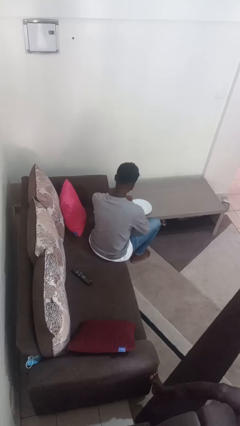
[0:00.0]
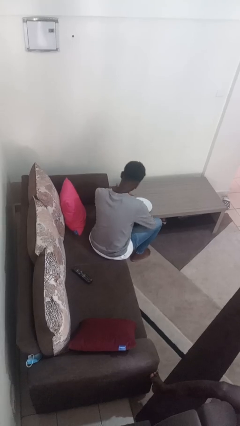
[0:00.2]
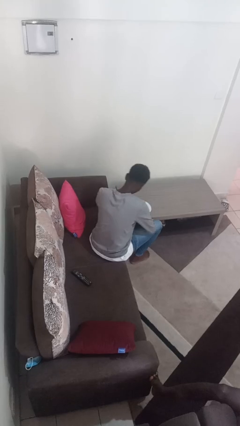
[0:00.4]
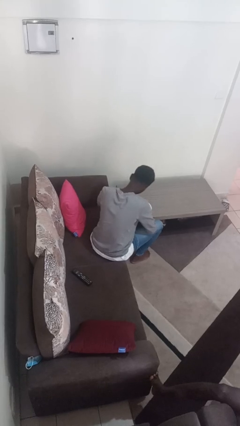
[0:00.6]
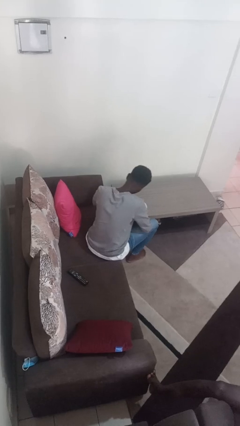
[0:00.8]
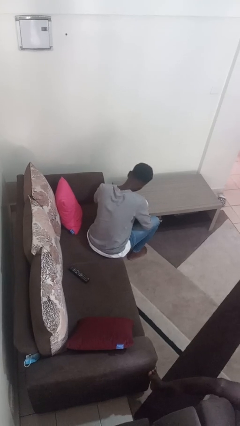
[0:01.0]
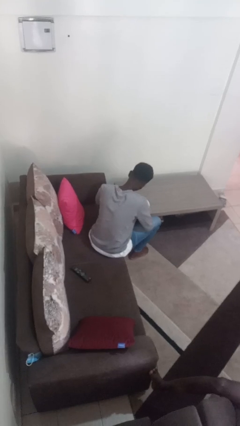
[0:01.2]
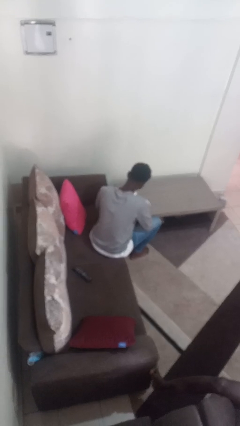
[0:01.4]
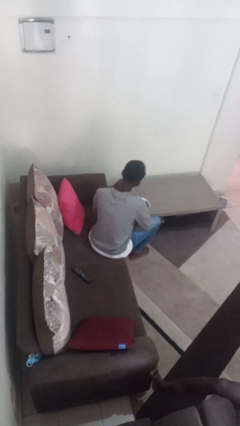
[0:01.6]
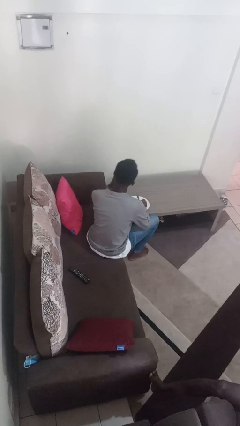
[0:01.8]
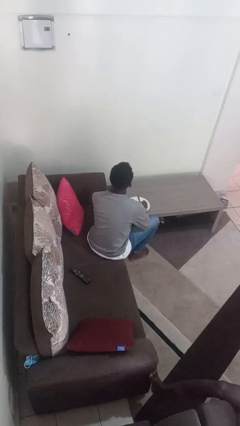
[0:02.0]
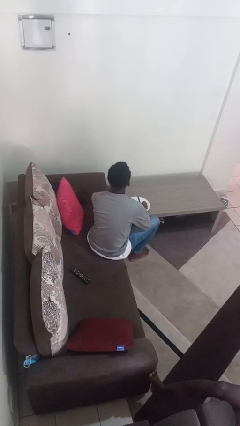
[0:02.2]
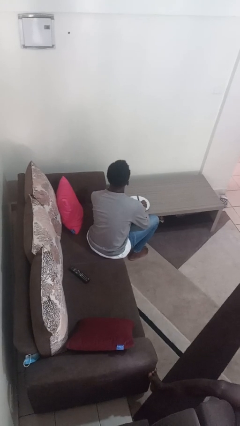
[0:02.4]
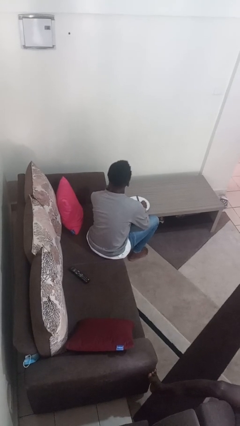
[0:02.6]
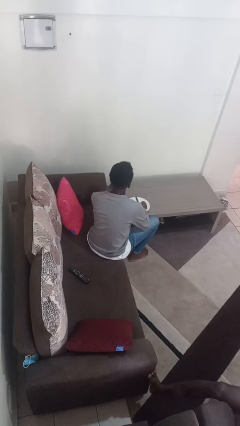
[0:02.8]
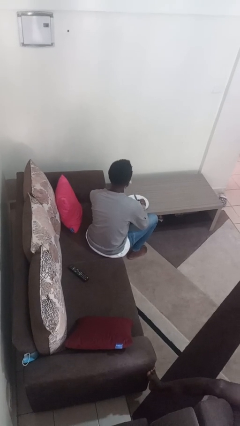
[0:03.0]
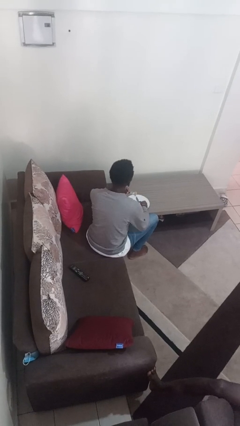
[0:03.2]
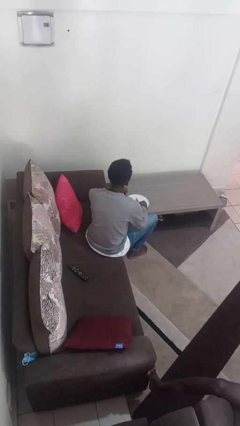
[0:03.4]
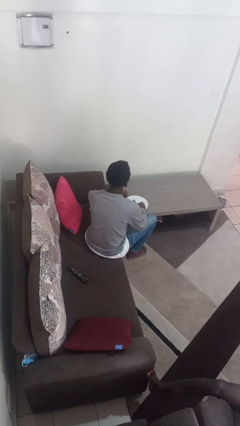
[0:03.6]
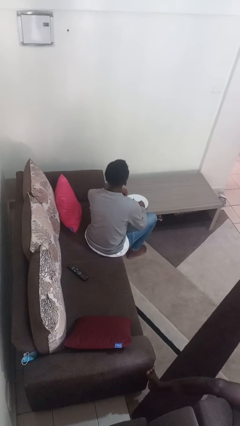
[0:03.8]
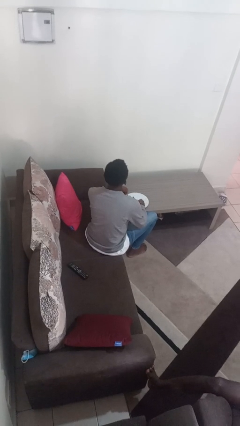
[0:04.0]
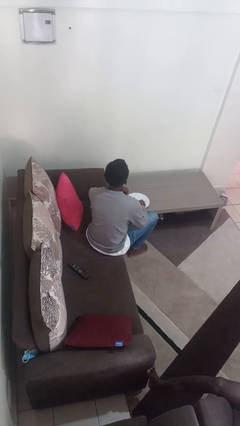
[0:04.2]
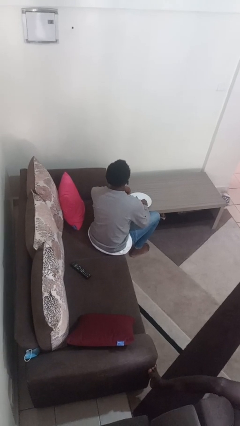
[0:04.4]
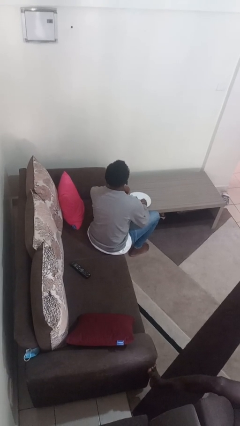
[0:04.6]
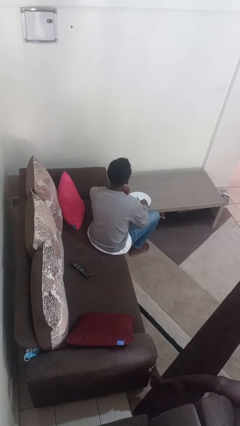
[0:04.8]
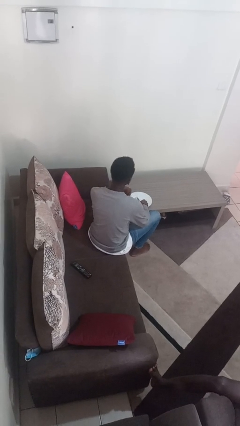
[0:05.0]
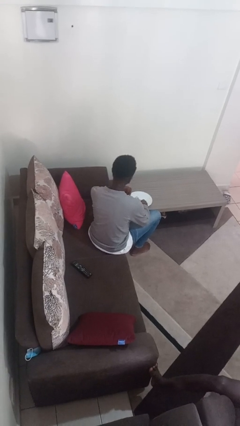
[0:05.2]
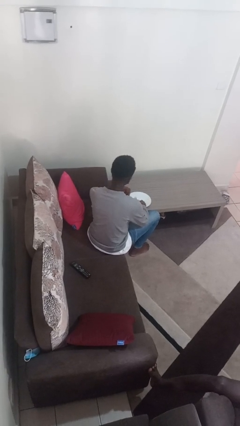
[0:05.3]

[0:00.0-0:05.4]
person eats with utensil

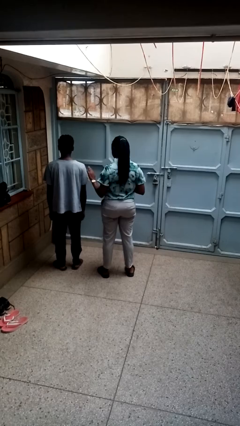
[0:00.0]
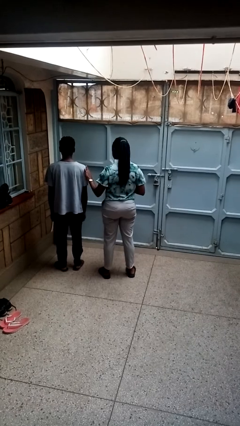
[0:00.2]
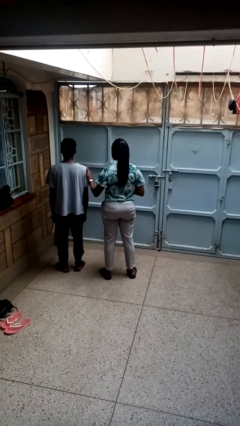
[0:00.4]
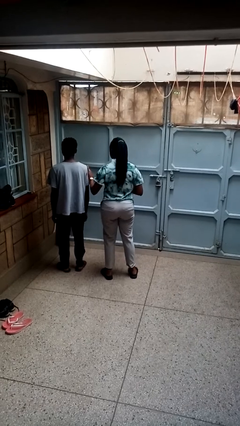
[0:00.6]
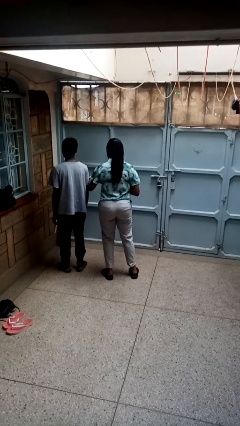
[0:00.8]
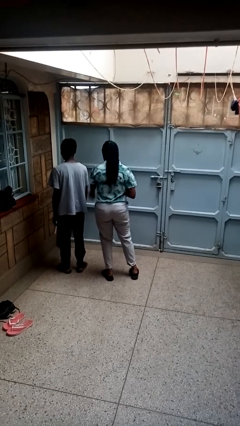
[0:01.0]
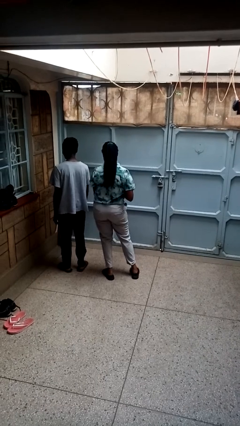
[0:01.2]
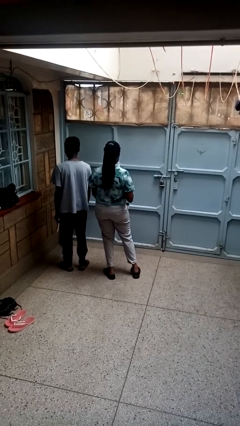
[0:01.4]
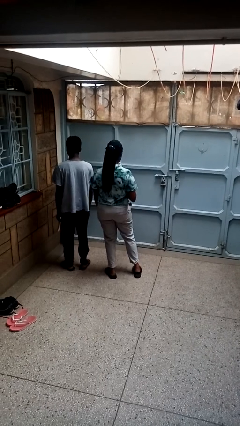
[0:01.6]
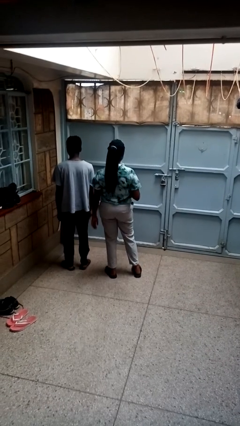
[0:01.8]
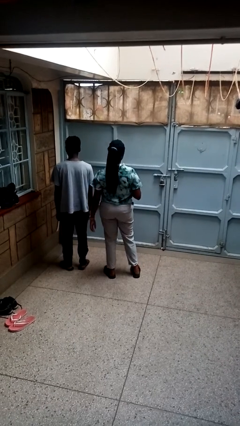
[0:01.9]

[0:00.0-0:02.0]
person shoves person

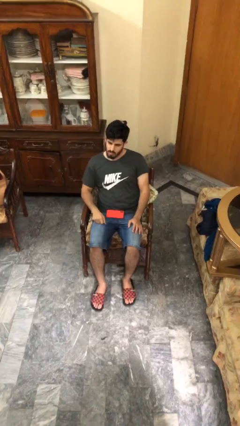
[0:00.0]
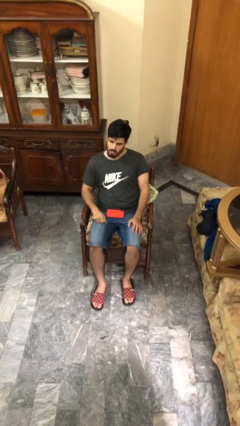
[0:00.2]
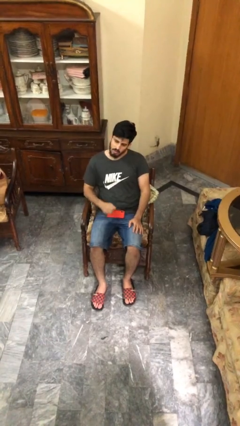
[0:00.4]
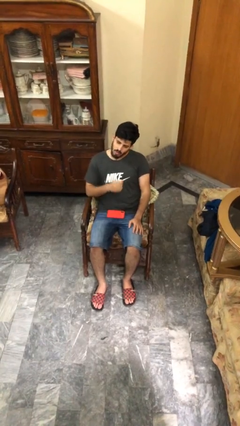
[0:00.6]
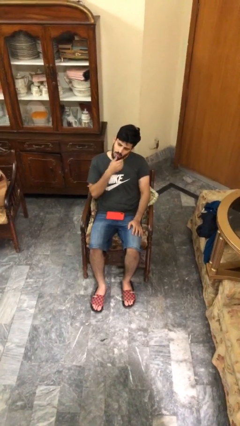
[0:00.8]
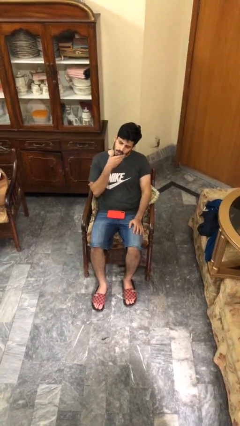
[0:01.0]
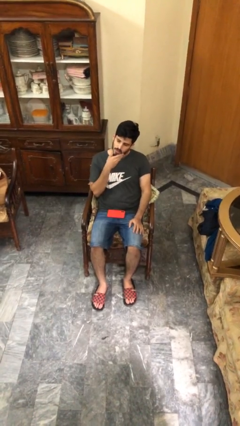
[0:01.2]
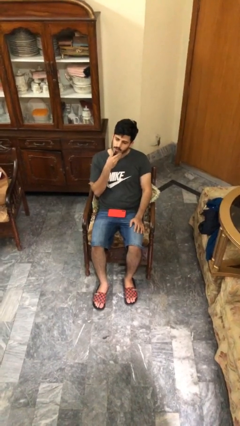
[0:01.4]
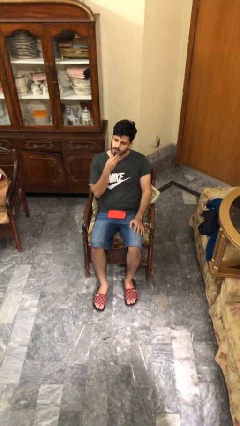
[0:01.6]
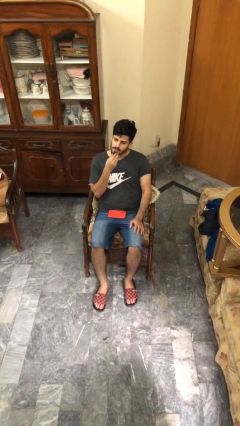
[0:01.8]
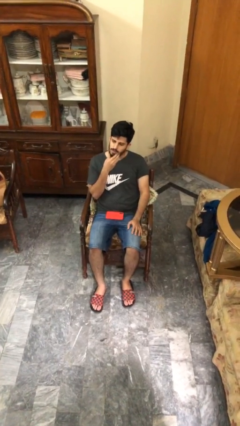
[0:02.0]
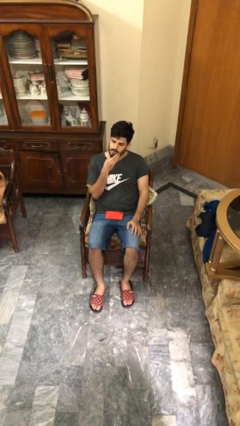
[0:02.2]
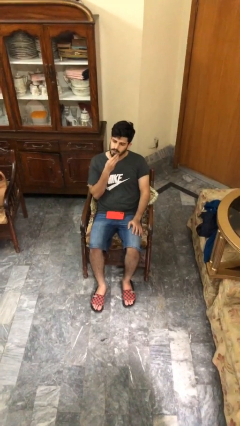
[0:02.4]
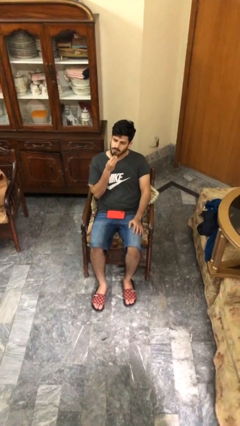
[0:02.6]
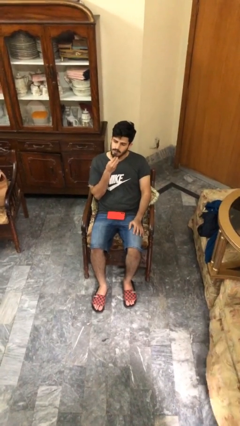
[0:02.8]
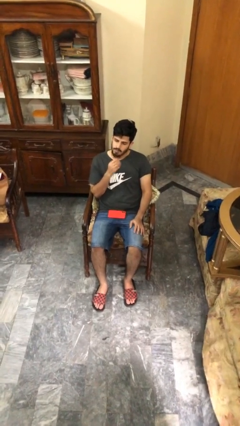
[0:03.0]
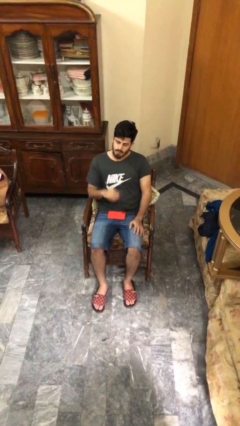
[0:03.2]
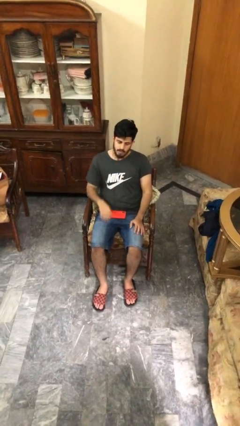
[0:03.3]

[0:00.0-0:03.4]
person strokes chin

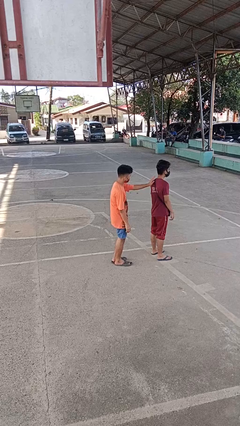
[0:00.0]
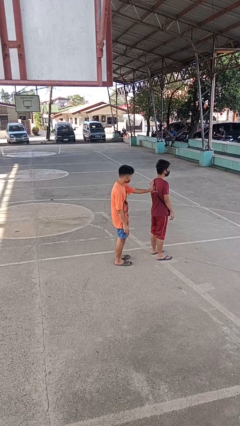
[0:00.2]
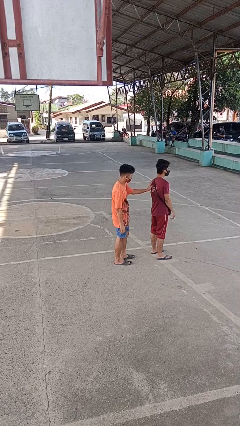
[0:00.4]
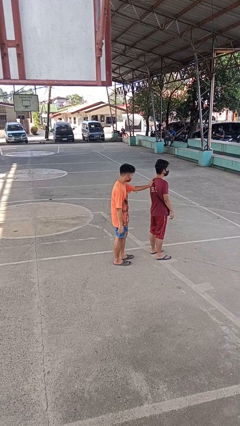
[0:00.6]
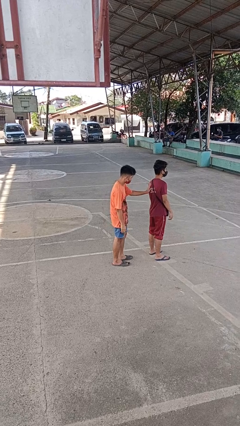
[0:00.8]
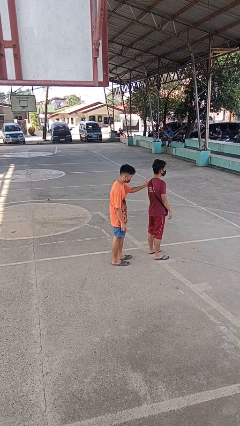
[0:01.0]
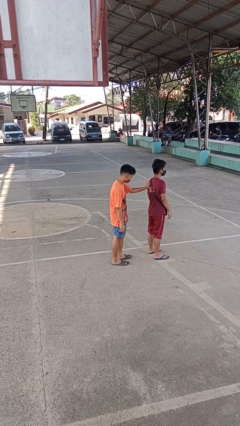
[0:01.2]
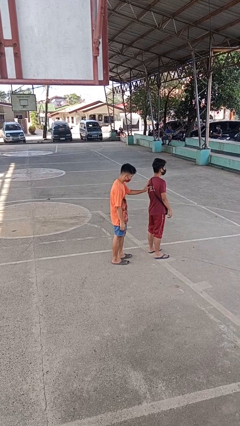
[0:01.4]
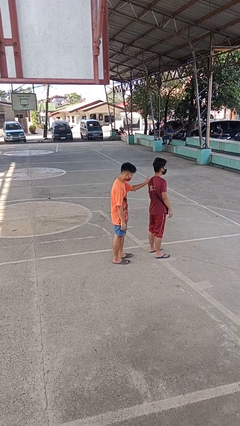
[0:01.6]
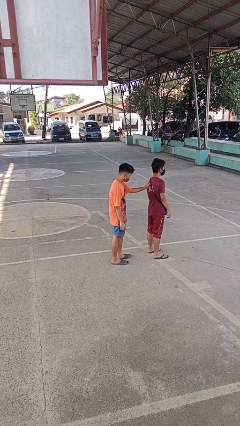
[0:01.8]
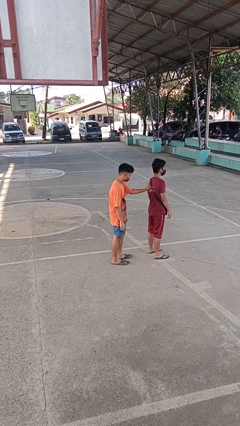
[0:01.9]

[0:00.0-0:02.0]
person touches back of person

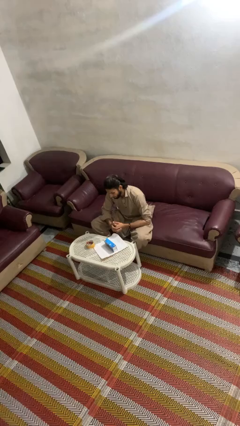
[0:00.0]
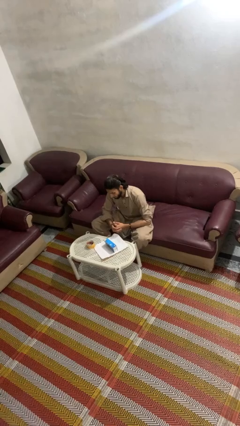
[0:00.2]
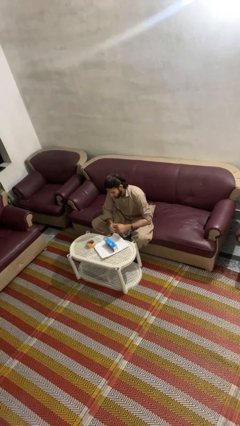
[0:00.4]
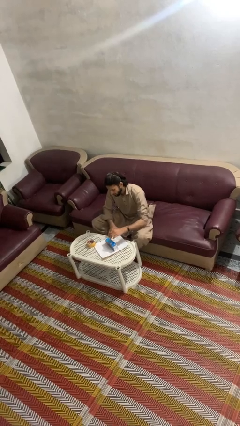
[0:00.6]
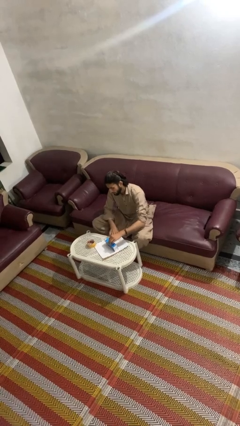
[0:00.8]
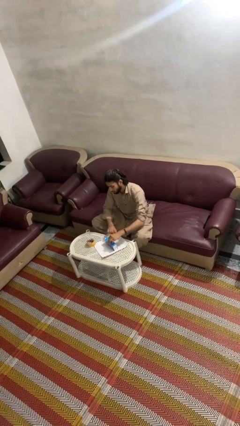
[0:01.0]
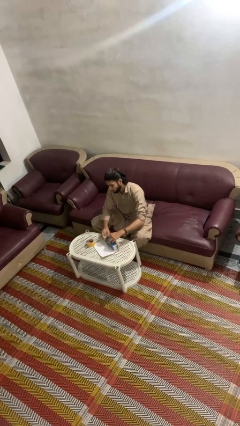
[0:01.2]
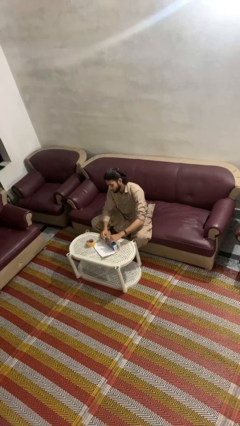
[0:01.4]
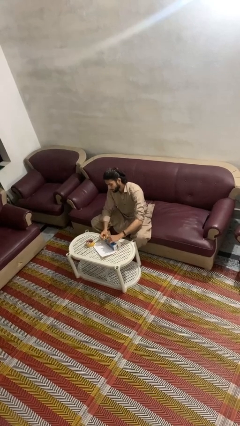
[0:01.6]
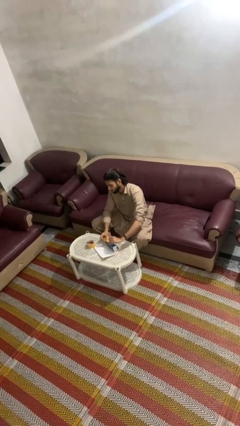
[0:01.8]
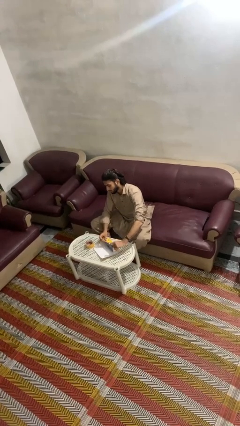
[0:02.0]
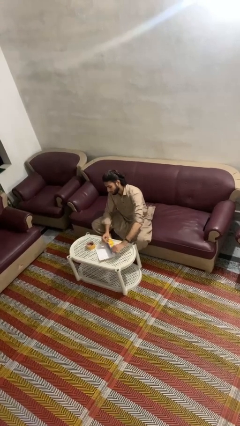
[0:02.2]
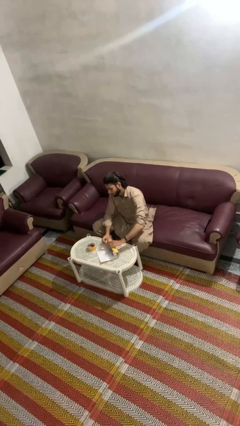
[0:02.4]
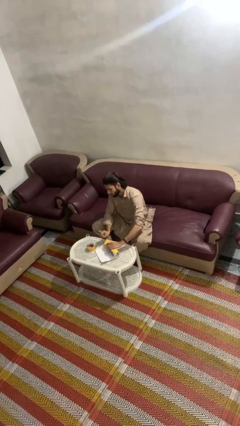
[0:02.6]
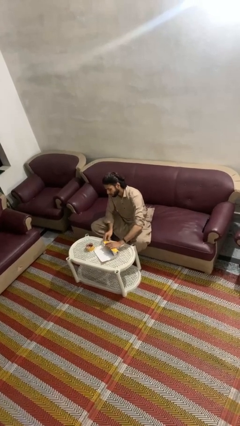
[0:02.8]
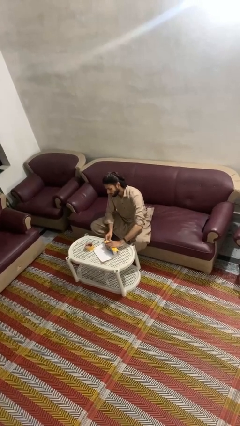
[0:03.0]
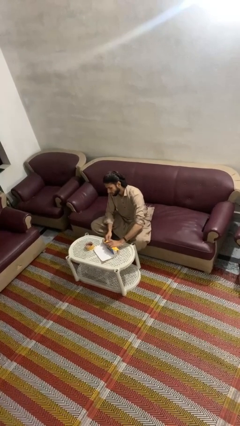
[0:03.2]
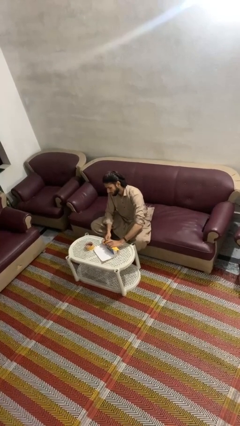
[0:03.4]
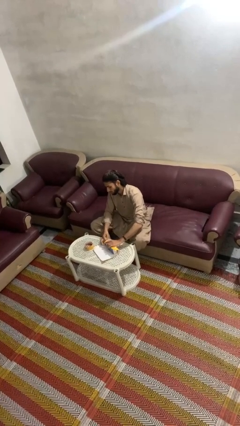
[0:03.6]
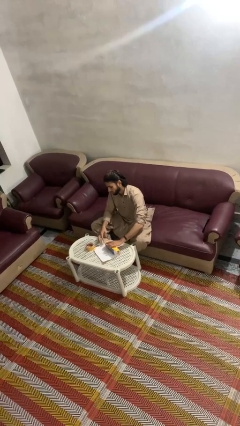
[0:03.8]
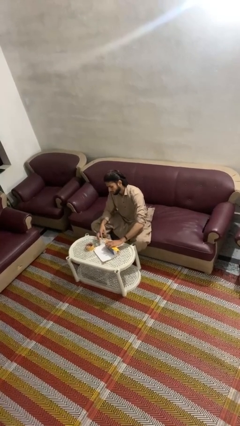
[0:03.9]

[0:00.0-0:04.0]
person wraps box

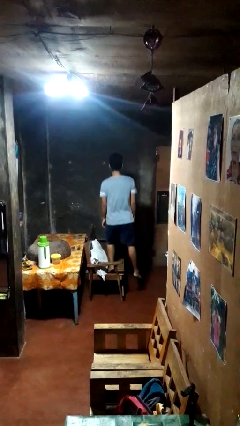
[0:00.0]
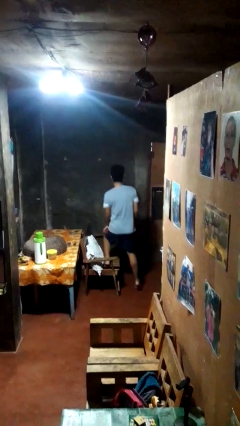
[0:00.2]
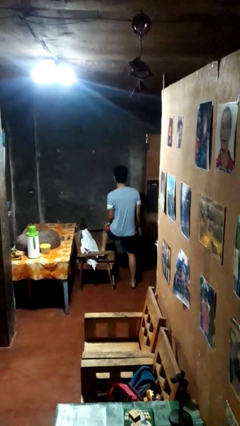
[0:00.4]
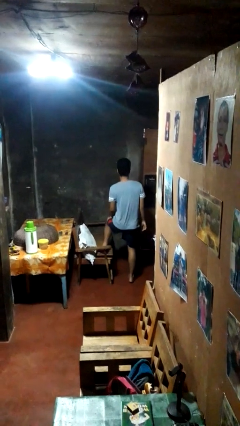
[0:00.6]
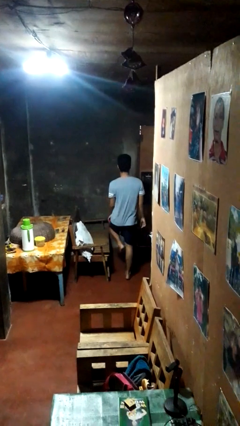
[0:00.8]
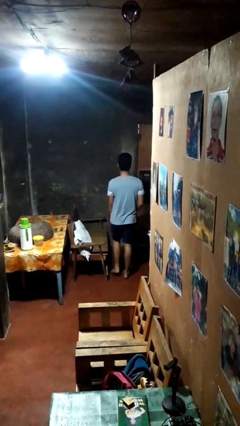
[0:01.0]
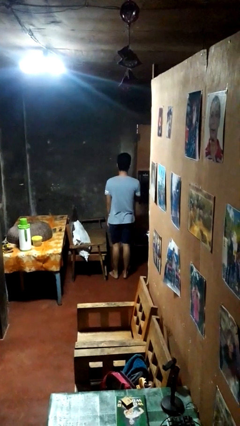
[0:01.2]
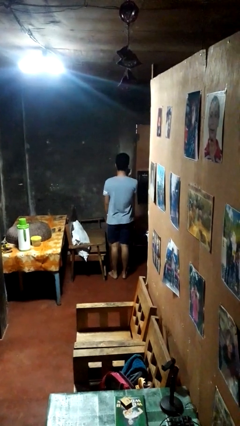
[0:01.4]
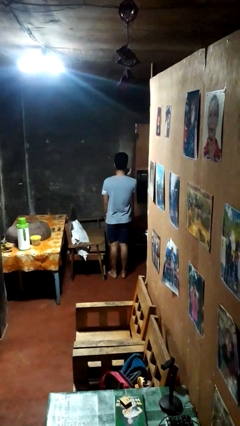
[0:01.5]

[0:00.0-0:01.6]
person climbs off couch
